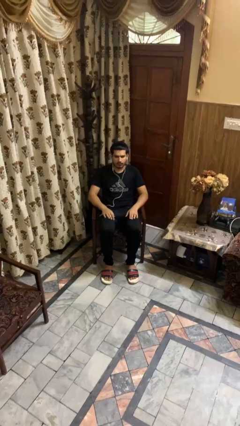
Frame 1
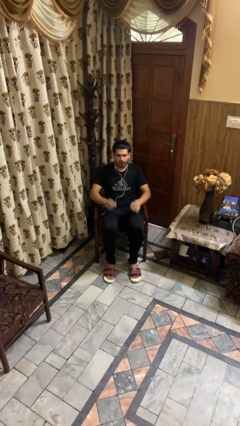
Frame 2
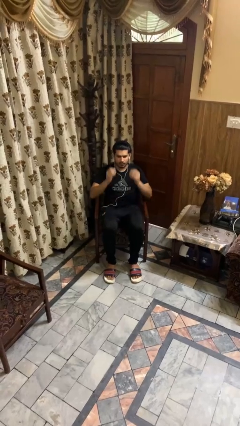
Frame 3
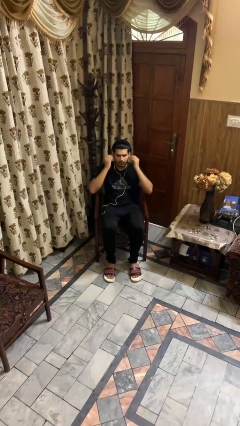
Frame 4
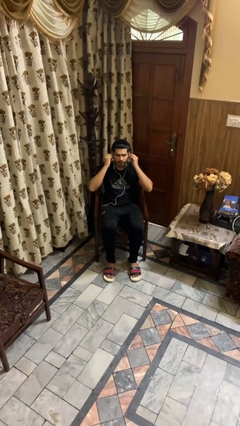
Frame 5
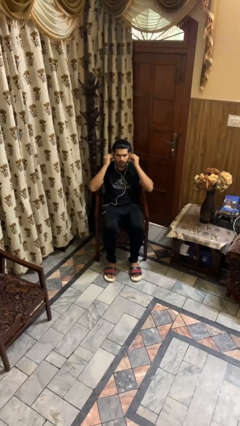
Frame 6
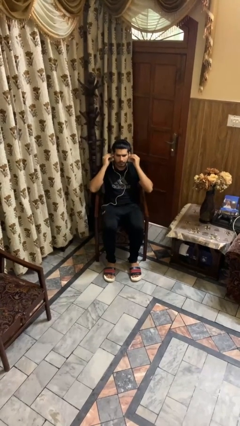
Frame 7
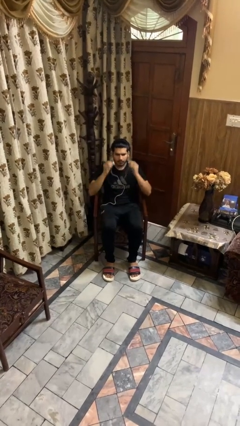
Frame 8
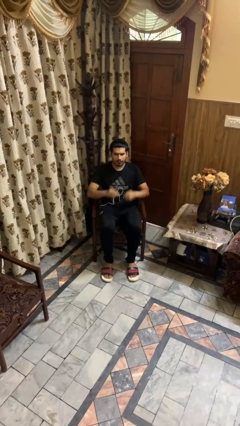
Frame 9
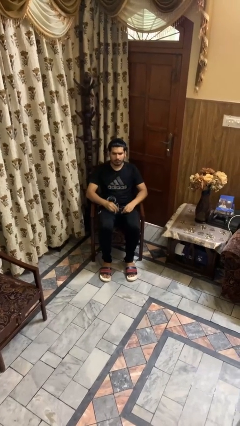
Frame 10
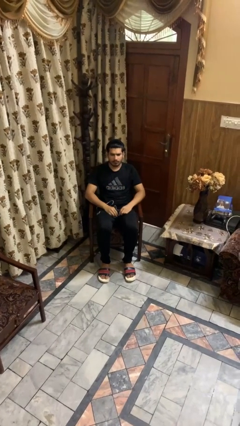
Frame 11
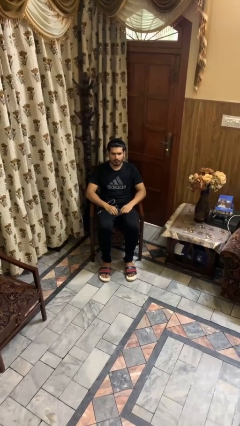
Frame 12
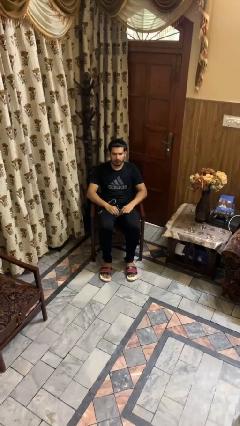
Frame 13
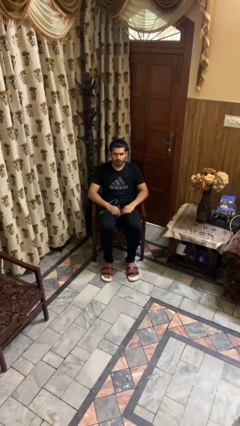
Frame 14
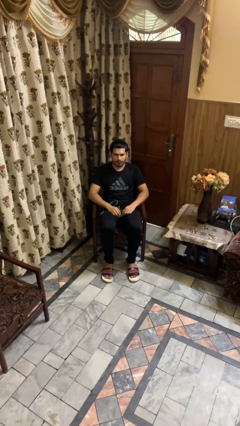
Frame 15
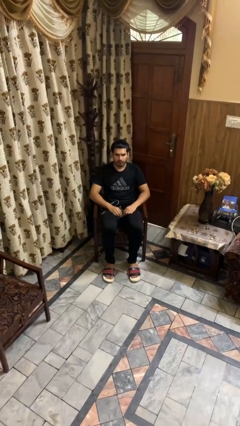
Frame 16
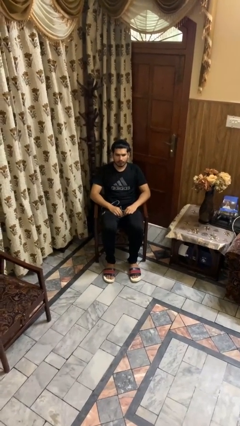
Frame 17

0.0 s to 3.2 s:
person takes off headphones

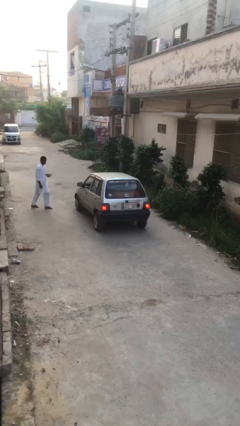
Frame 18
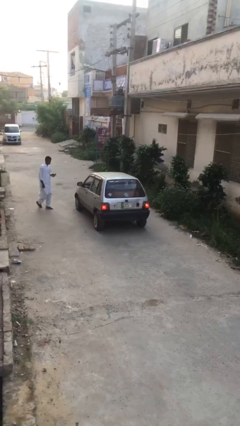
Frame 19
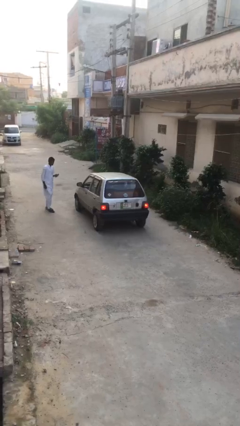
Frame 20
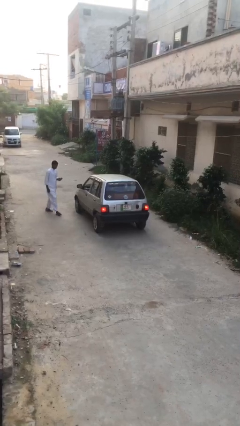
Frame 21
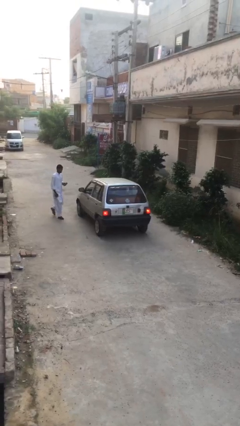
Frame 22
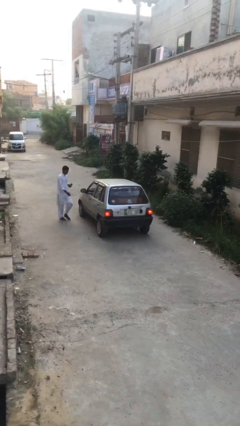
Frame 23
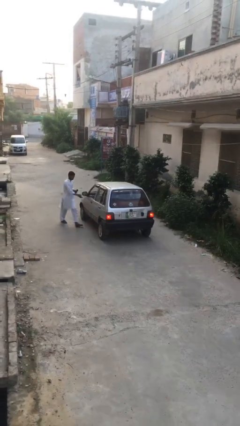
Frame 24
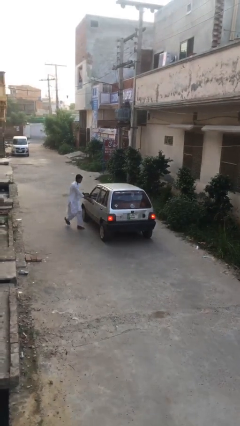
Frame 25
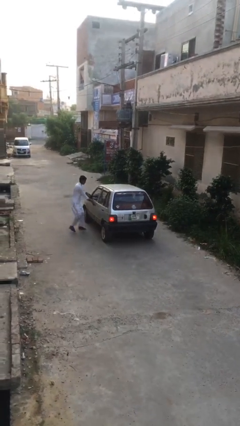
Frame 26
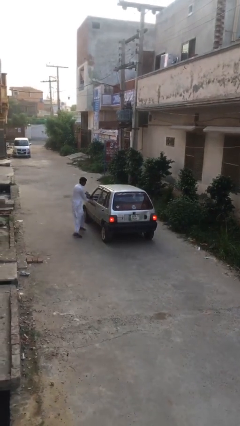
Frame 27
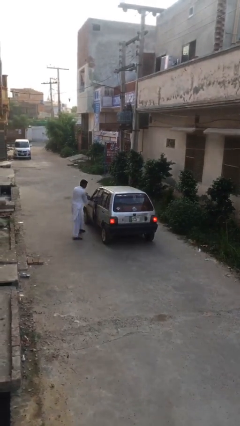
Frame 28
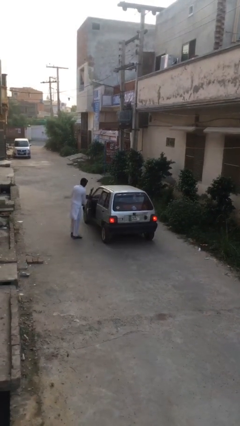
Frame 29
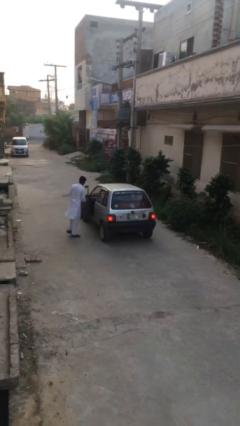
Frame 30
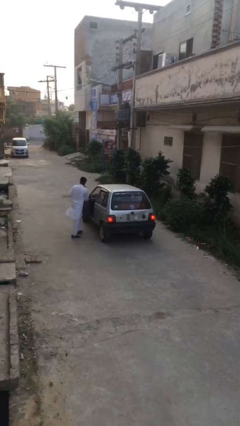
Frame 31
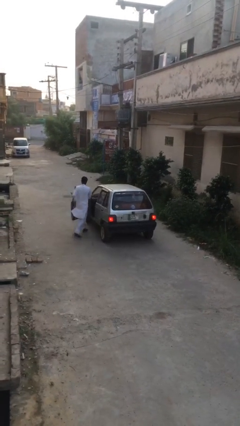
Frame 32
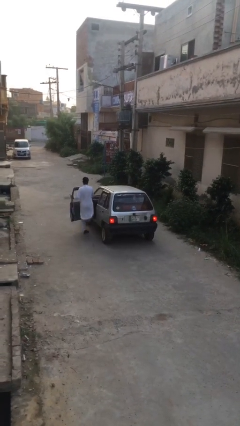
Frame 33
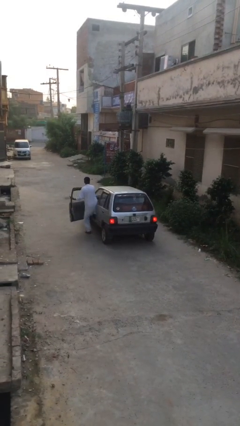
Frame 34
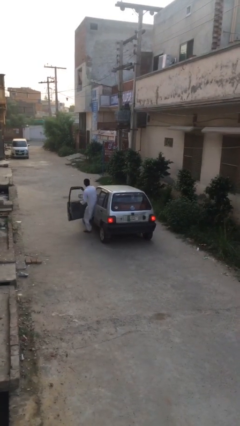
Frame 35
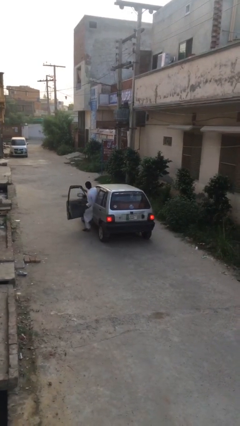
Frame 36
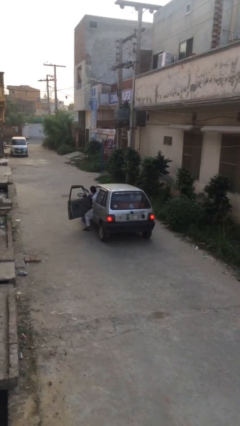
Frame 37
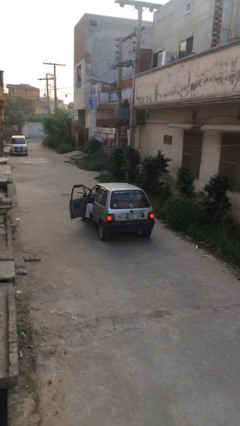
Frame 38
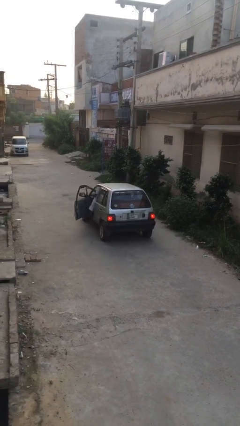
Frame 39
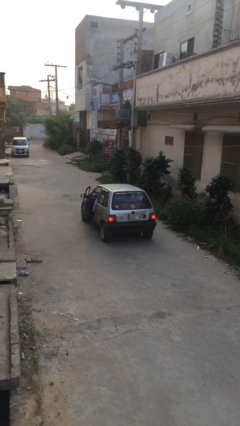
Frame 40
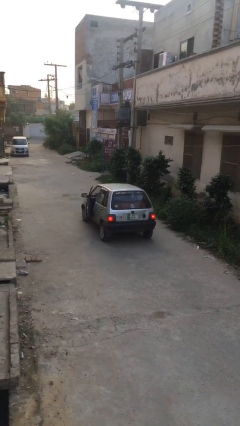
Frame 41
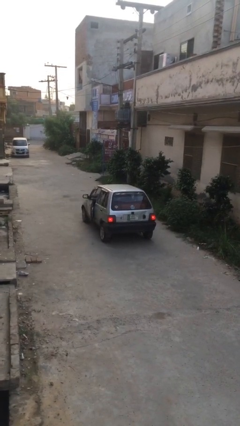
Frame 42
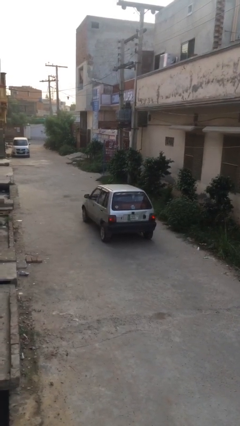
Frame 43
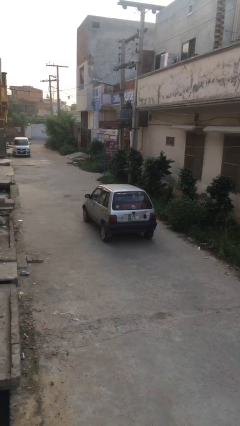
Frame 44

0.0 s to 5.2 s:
car picks up person

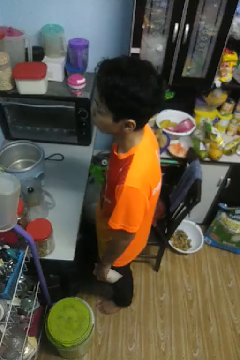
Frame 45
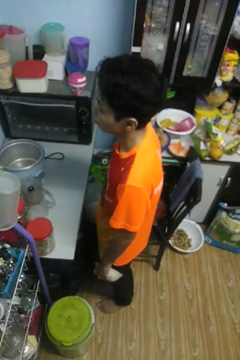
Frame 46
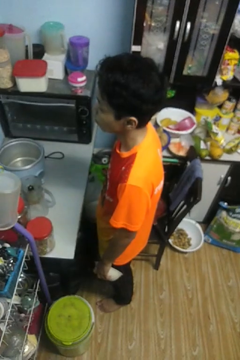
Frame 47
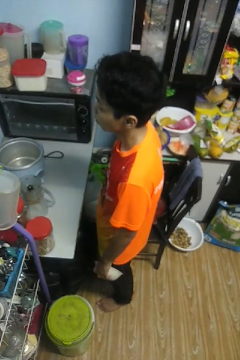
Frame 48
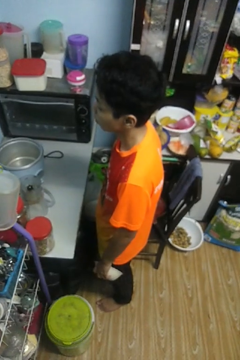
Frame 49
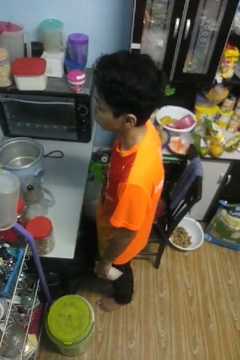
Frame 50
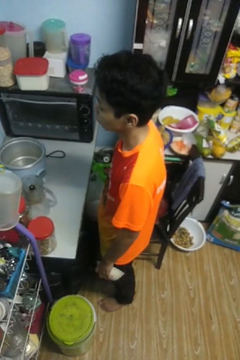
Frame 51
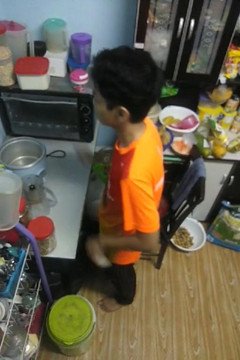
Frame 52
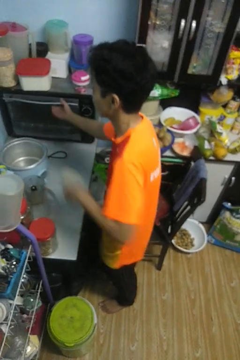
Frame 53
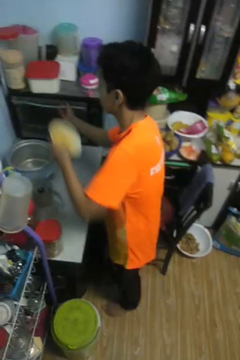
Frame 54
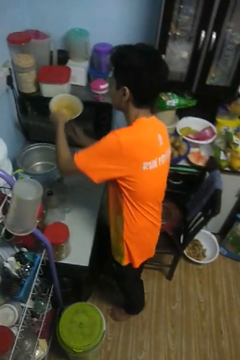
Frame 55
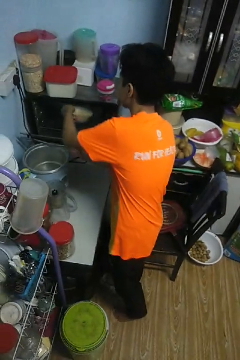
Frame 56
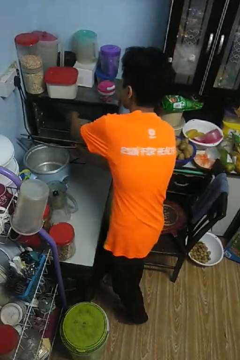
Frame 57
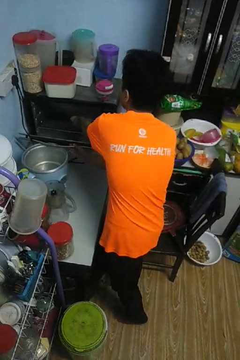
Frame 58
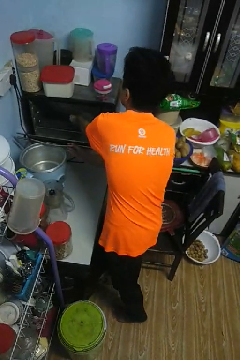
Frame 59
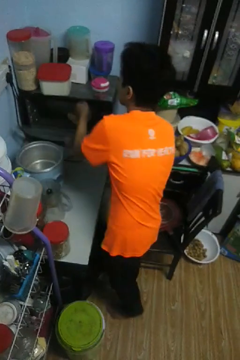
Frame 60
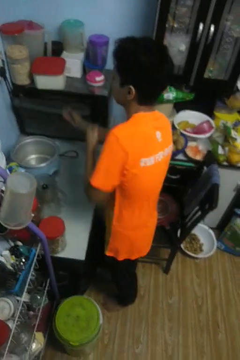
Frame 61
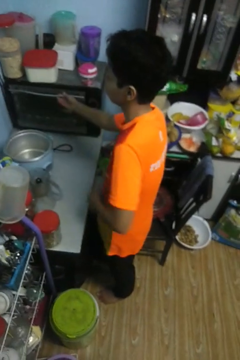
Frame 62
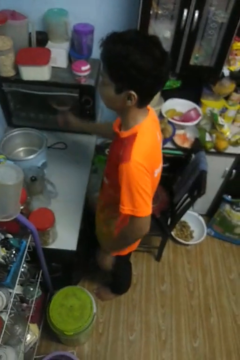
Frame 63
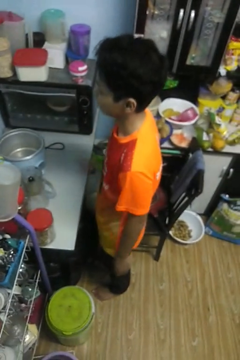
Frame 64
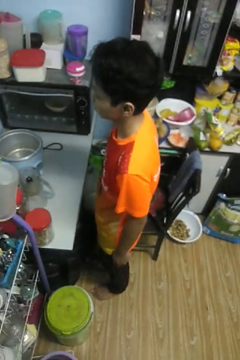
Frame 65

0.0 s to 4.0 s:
person puts object into oven

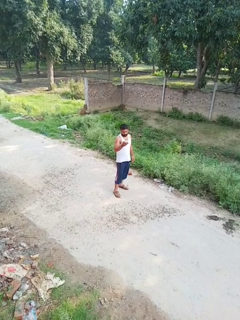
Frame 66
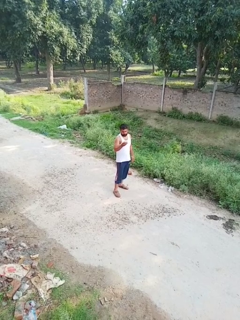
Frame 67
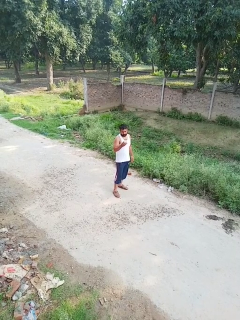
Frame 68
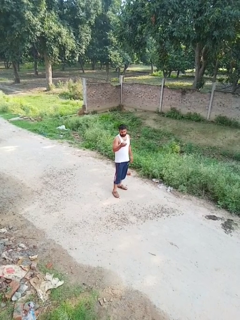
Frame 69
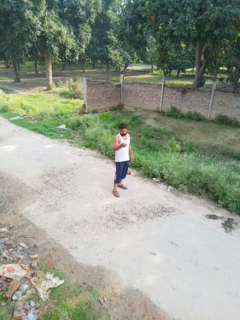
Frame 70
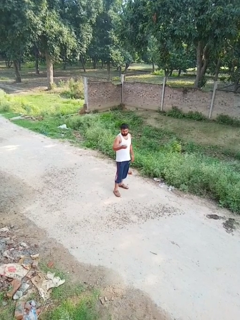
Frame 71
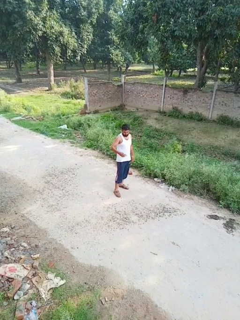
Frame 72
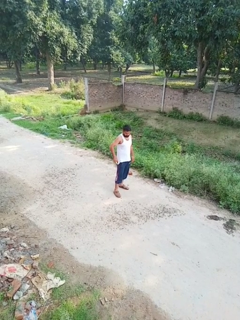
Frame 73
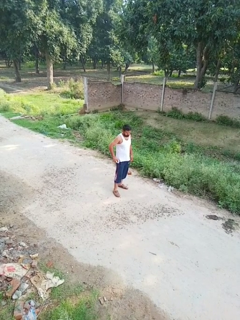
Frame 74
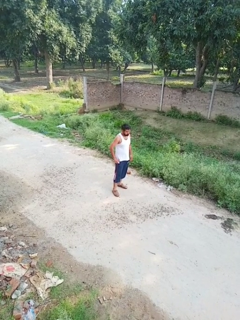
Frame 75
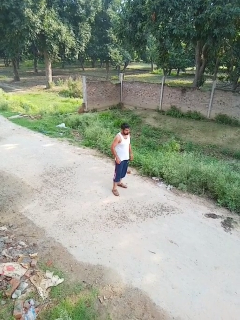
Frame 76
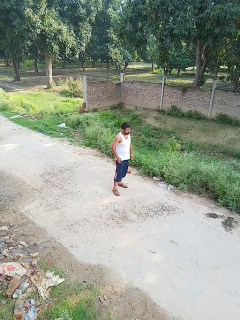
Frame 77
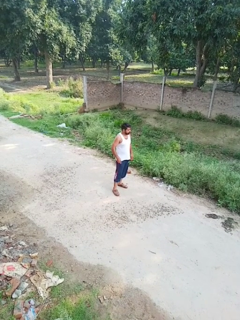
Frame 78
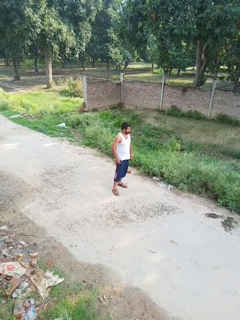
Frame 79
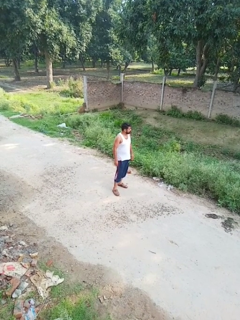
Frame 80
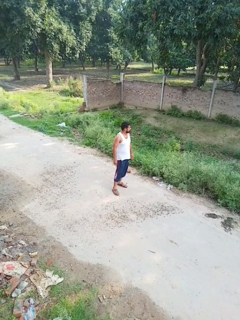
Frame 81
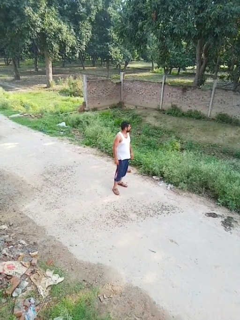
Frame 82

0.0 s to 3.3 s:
person puts phone into pocket

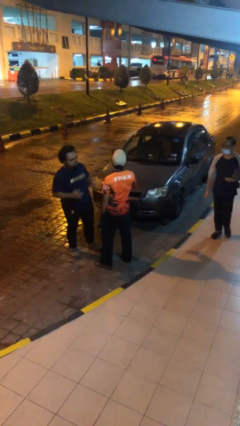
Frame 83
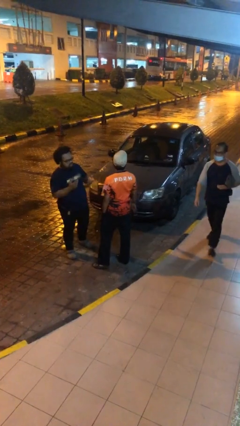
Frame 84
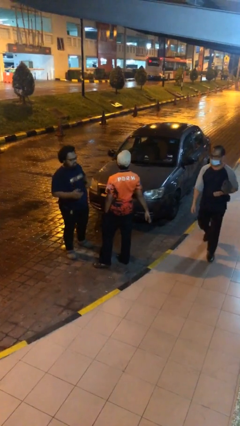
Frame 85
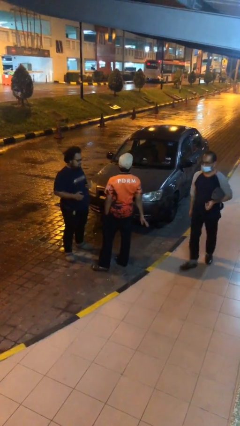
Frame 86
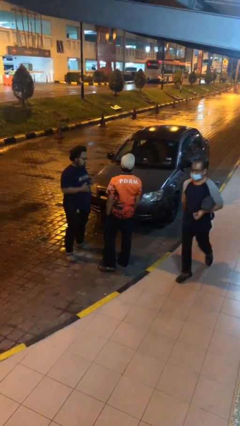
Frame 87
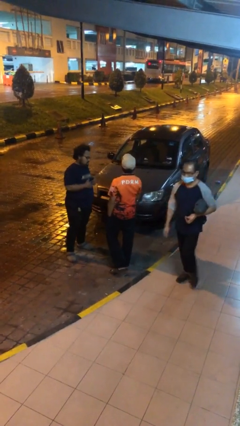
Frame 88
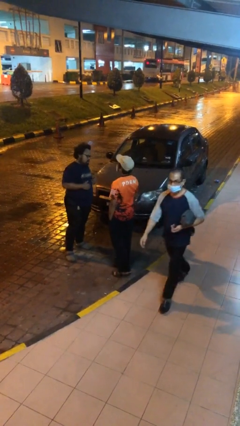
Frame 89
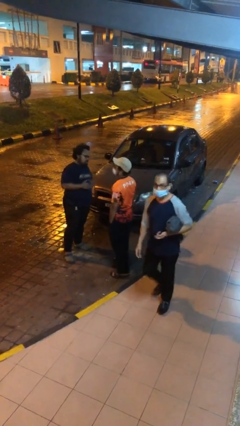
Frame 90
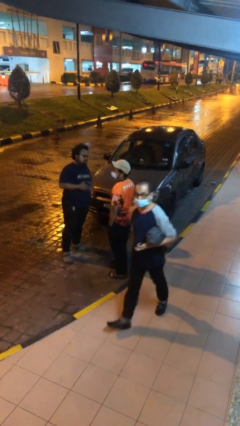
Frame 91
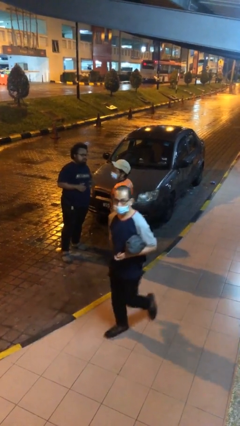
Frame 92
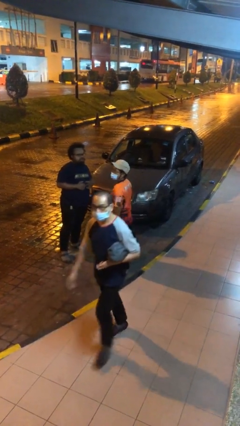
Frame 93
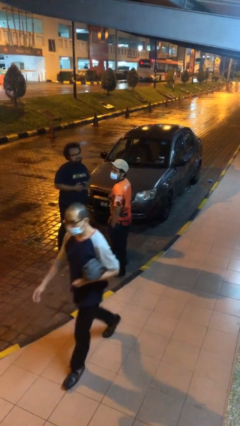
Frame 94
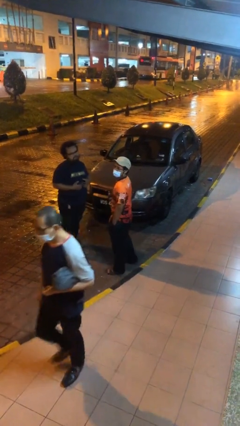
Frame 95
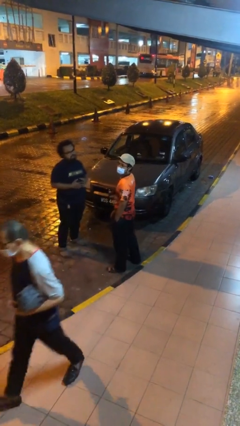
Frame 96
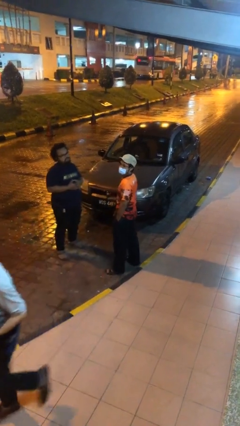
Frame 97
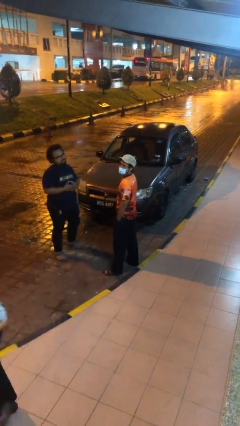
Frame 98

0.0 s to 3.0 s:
person talks to person

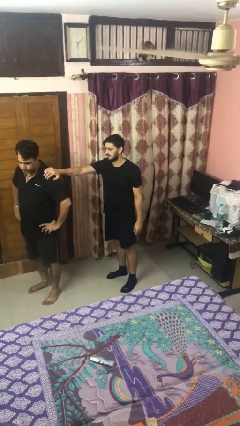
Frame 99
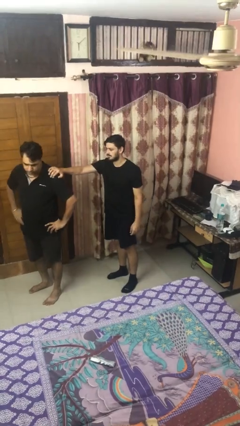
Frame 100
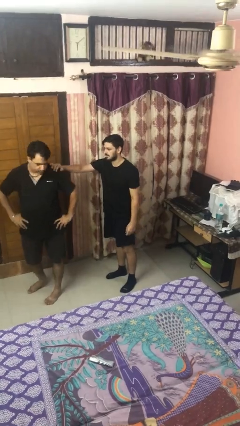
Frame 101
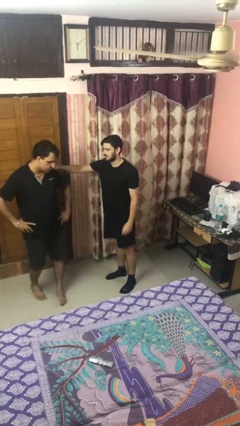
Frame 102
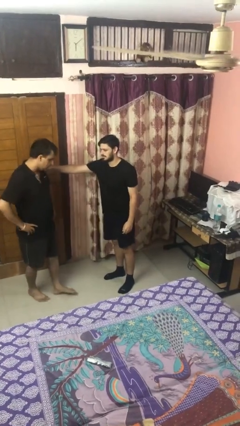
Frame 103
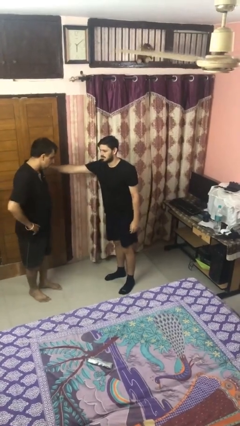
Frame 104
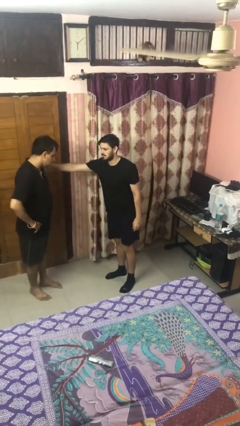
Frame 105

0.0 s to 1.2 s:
person spins person around
